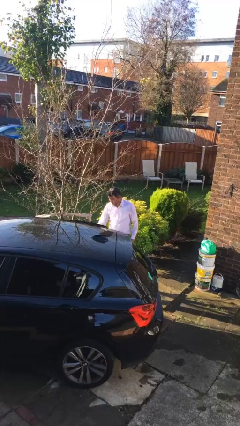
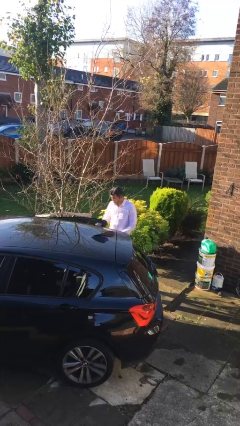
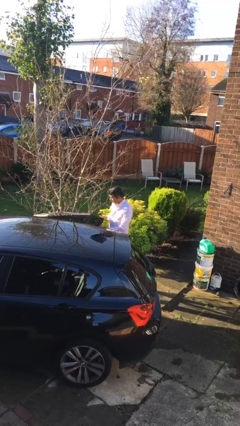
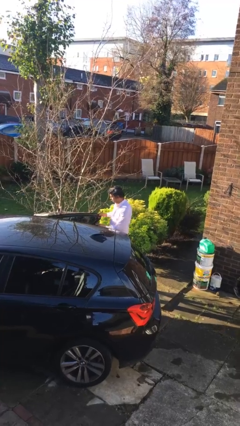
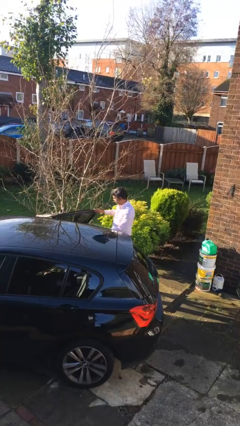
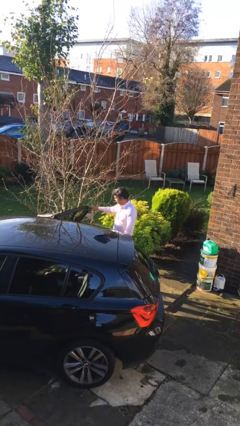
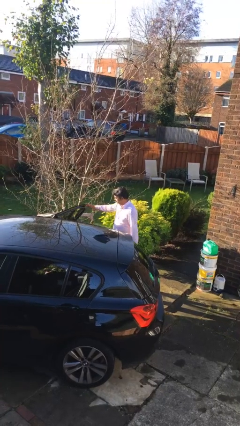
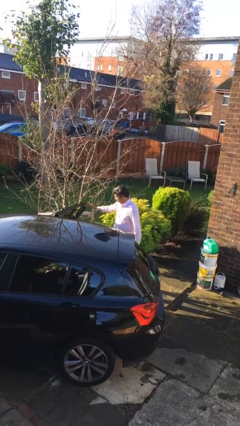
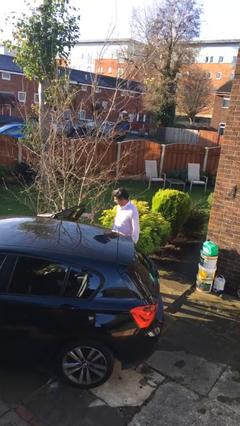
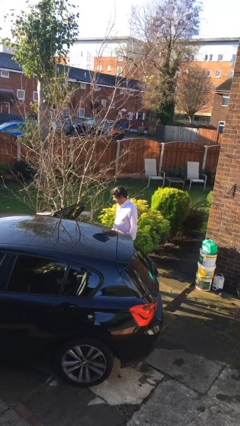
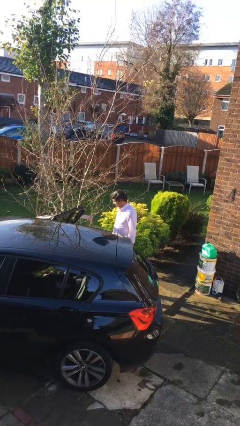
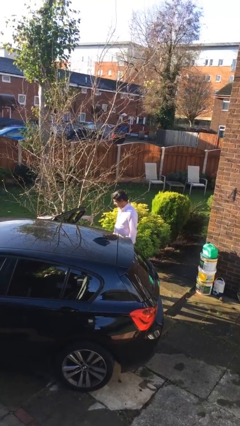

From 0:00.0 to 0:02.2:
person opens car door

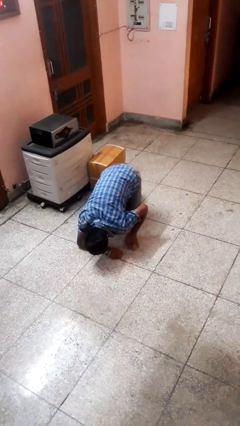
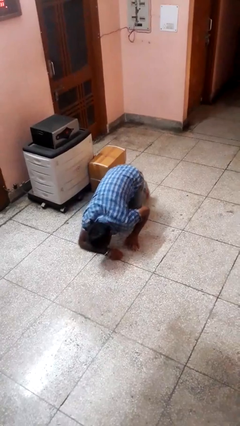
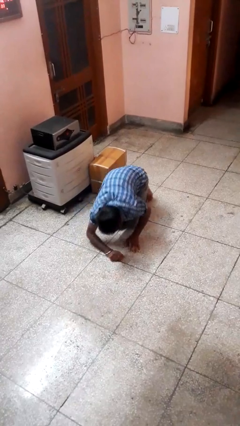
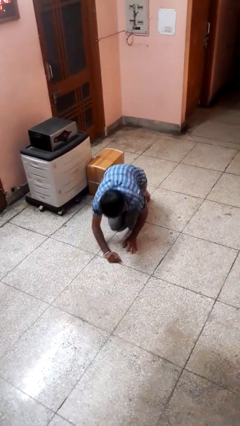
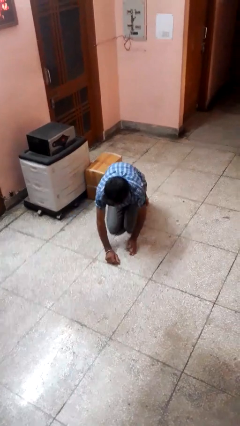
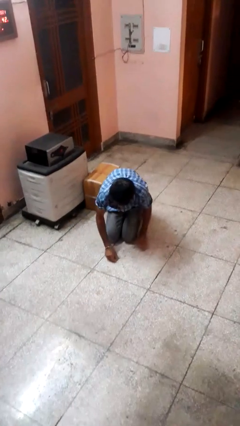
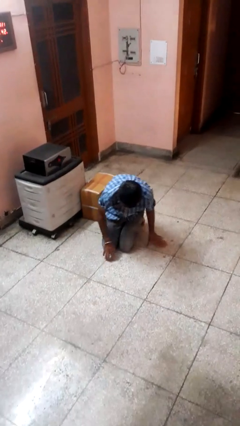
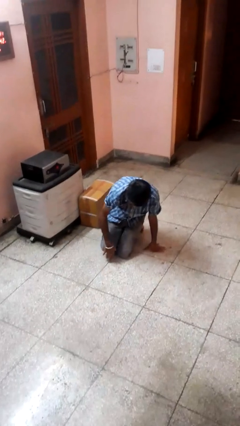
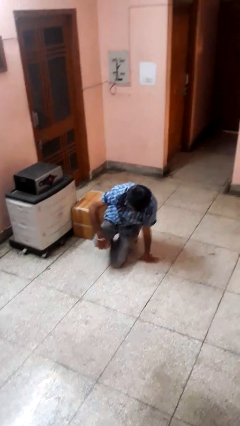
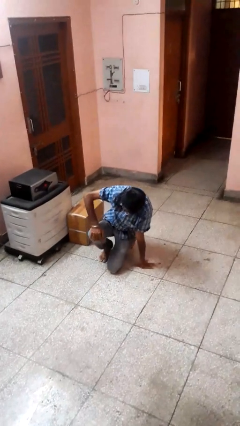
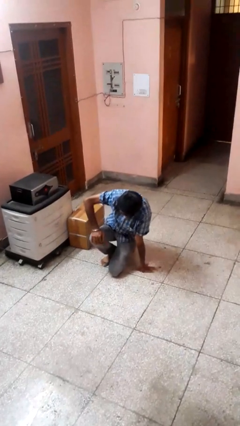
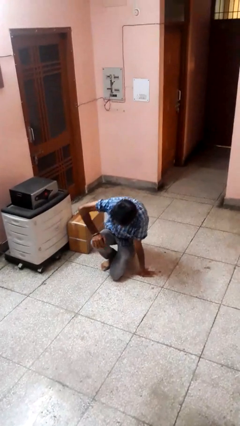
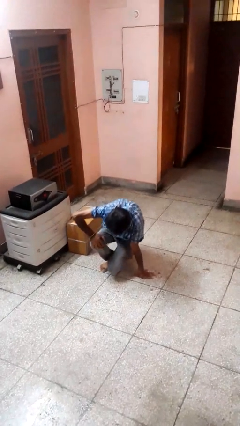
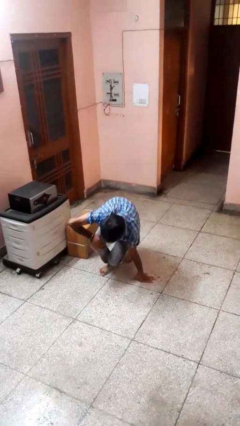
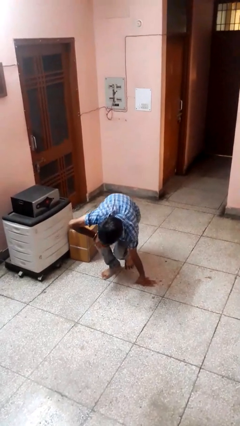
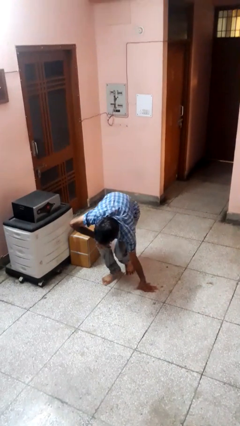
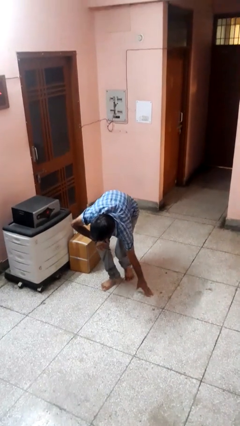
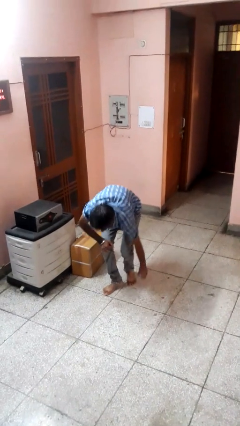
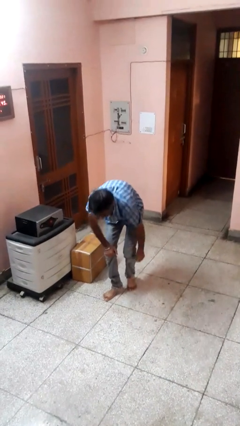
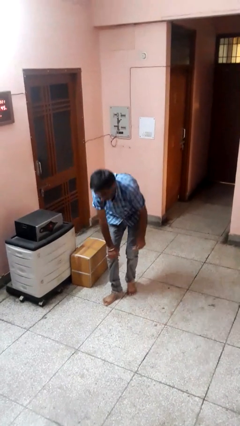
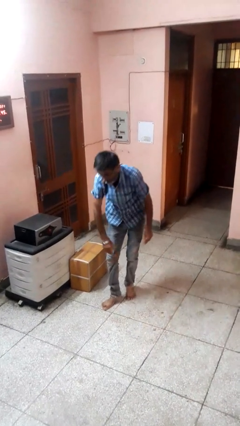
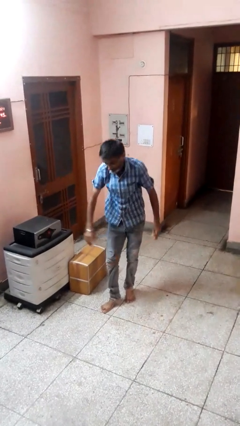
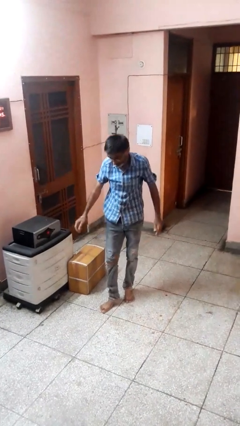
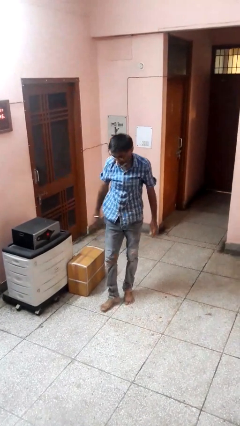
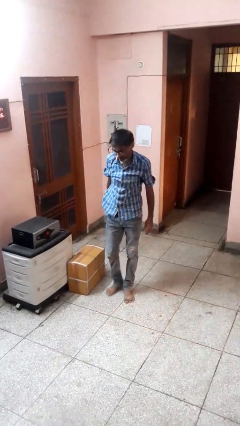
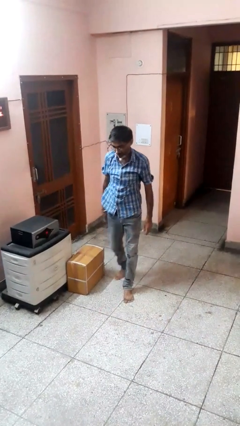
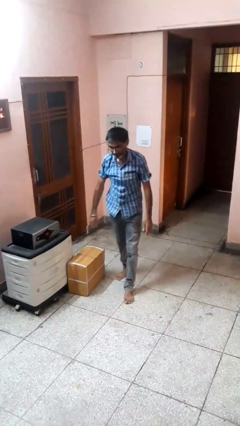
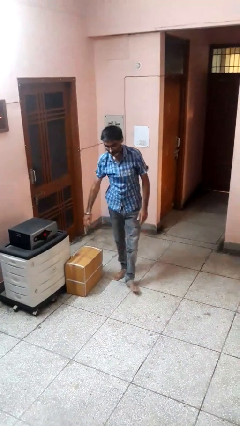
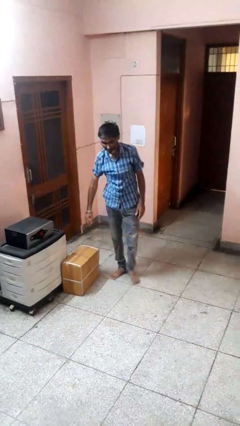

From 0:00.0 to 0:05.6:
person stands up from floor

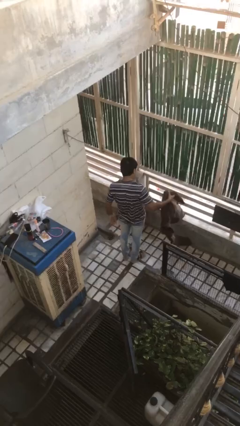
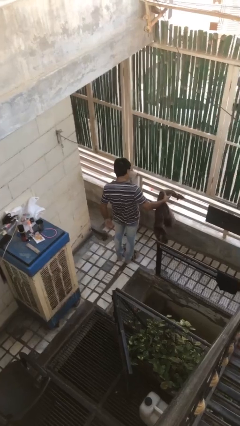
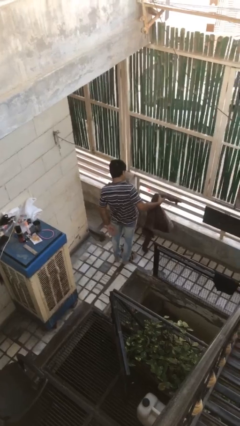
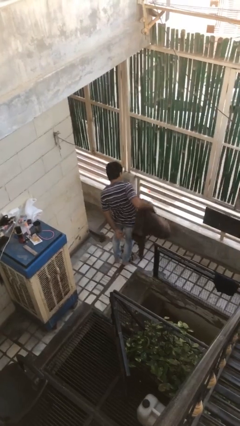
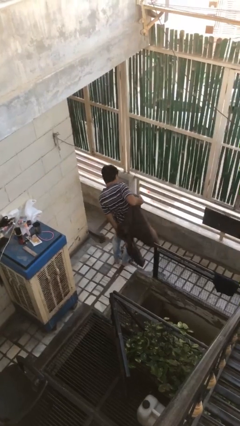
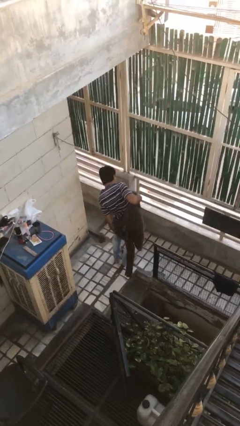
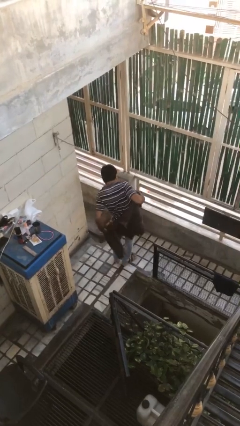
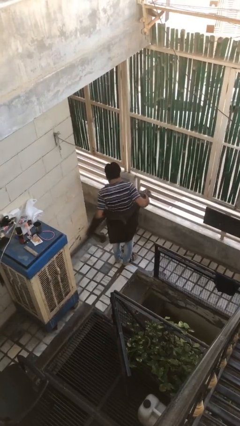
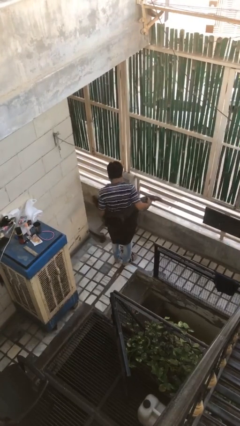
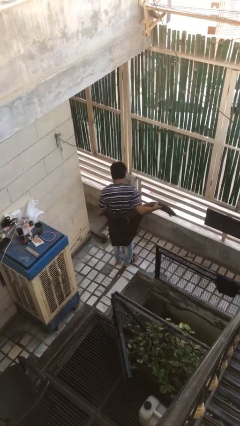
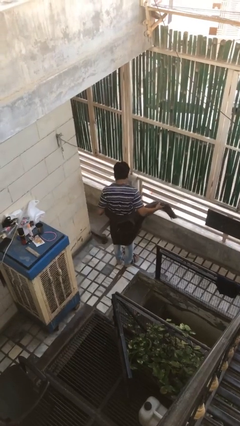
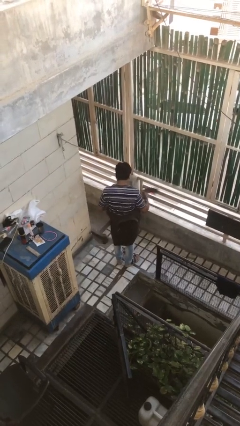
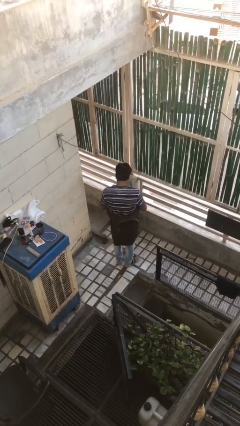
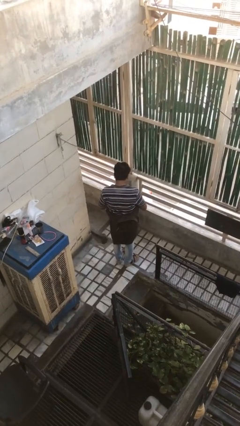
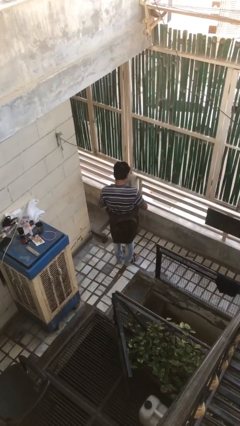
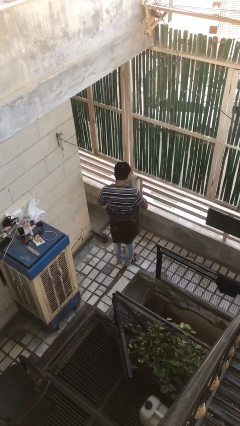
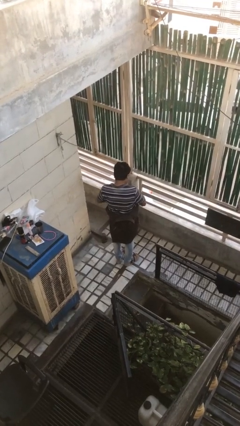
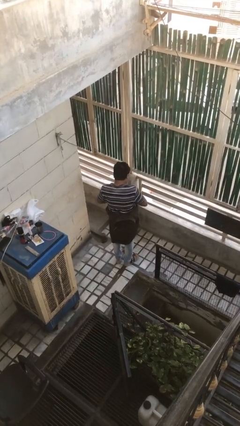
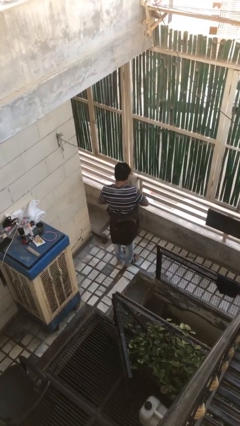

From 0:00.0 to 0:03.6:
person ties jacket around waist

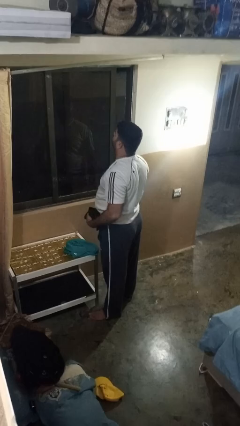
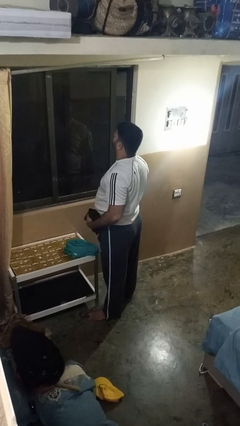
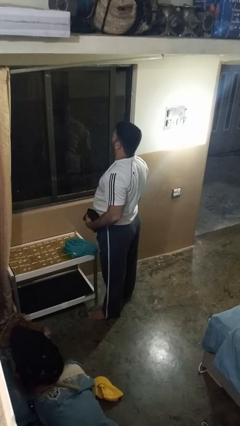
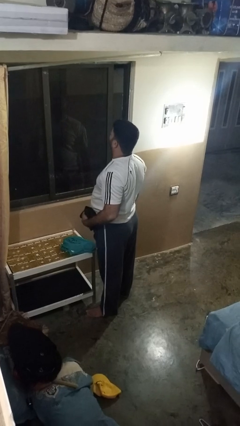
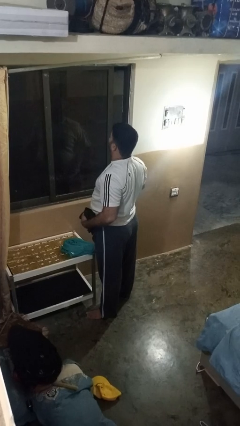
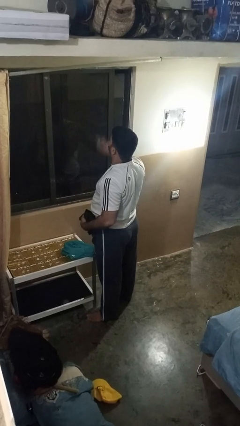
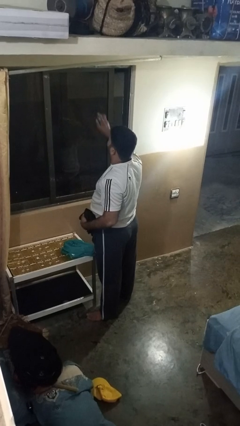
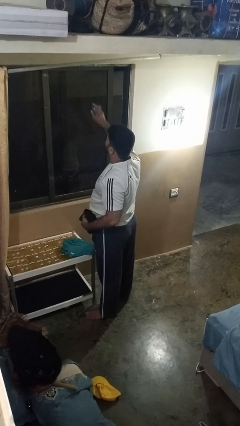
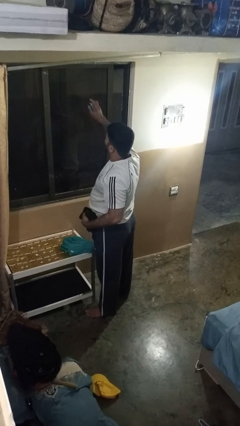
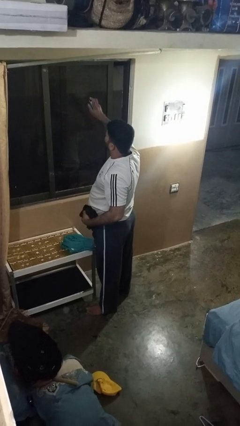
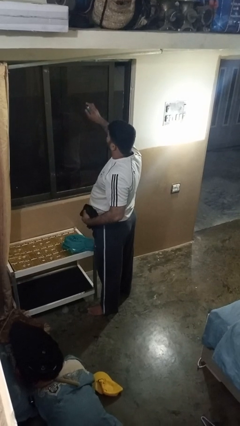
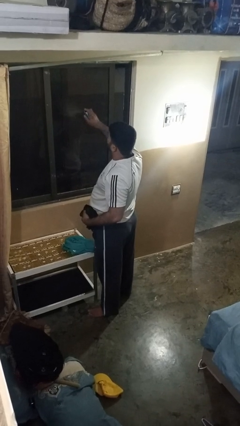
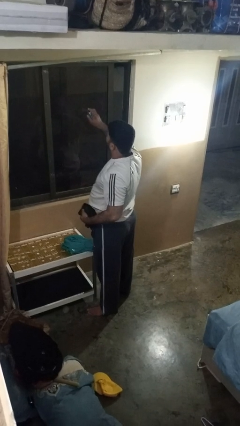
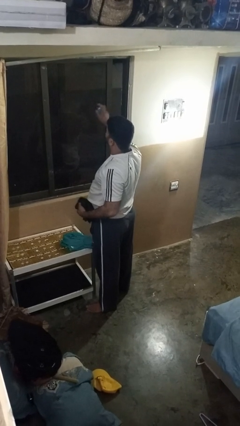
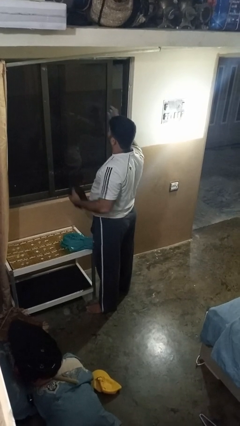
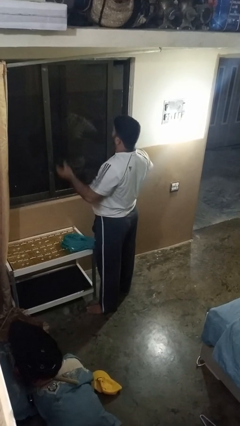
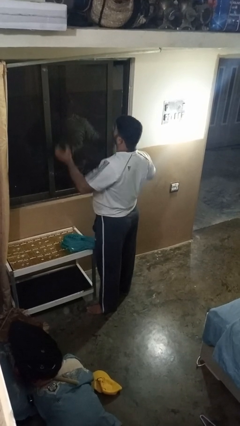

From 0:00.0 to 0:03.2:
person sprays from bottle

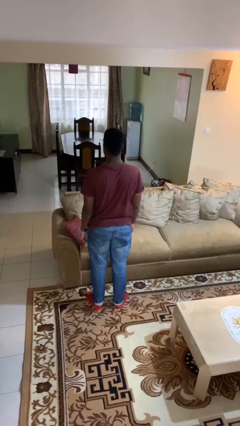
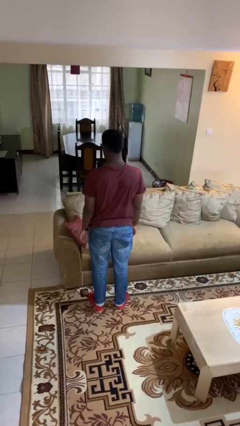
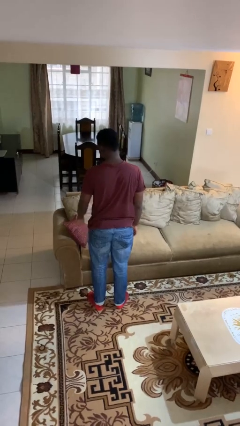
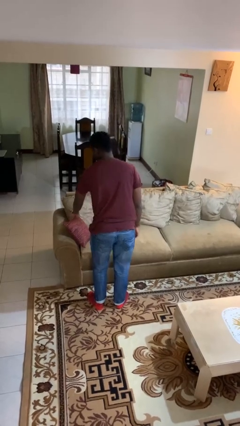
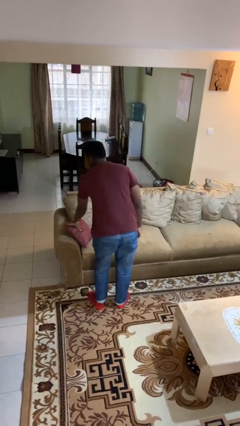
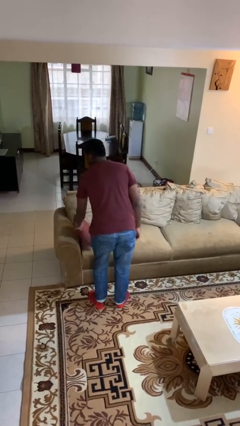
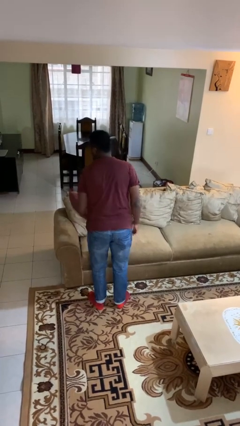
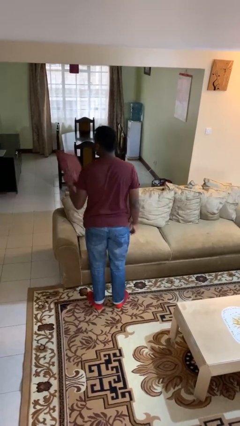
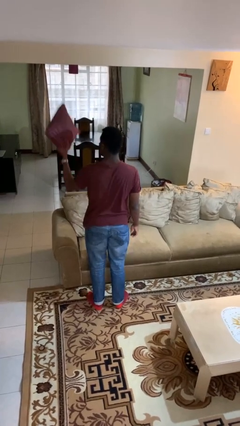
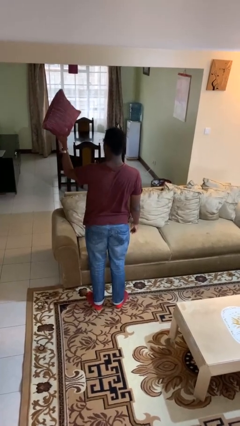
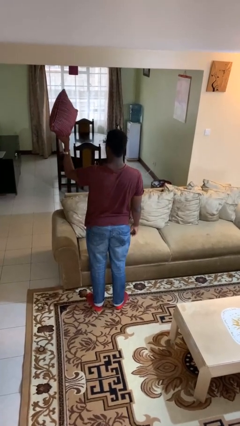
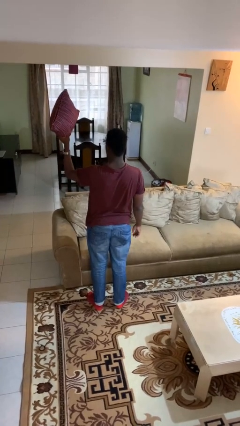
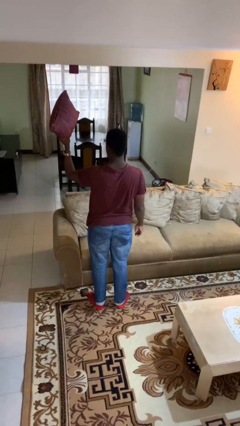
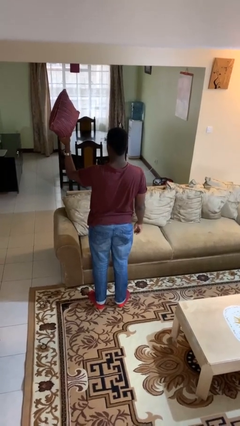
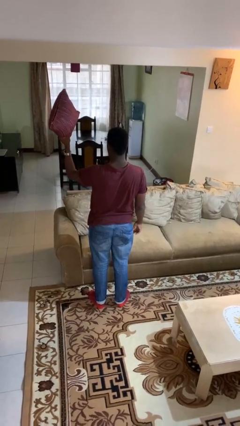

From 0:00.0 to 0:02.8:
person picks up object from couch

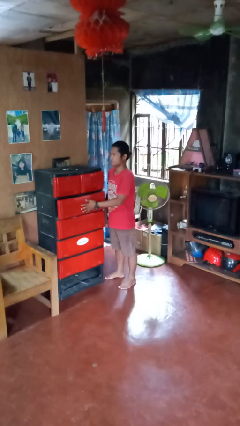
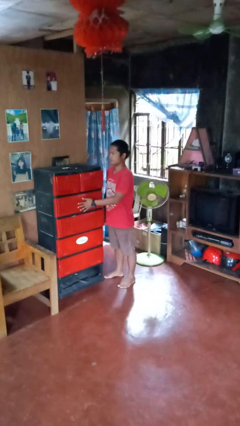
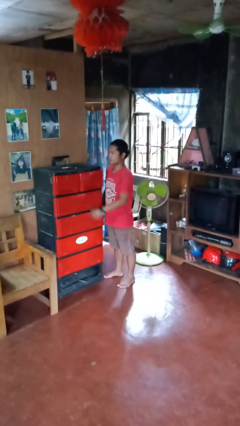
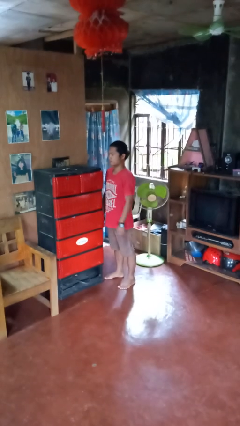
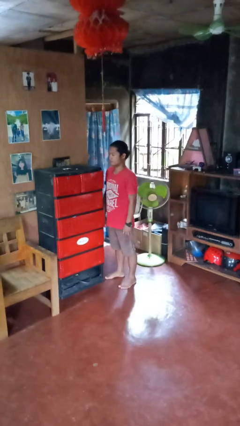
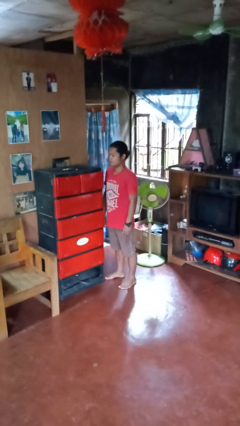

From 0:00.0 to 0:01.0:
person closes dresser drawer
